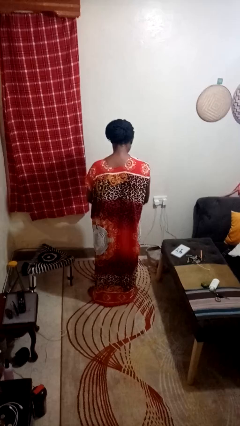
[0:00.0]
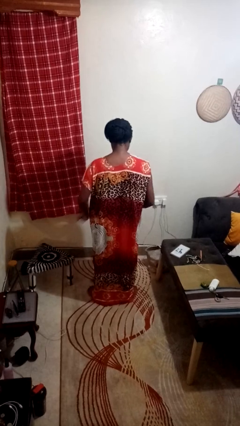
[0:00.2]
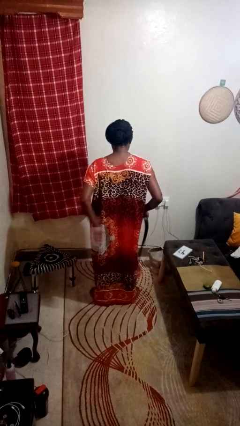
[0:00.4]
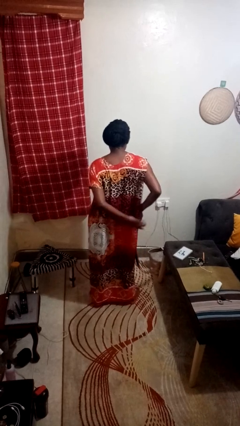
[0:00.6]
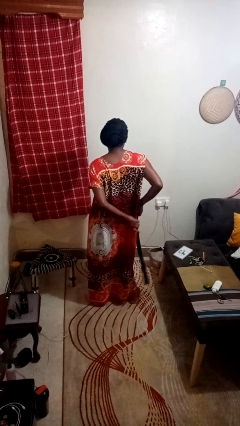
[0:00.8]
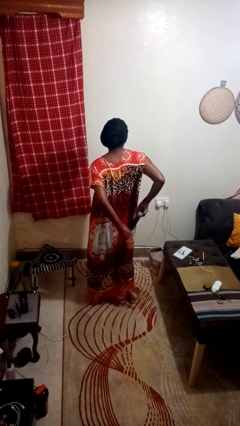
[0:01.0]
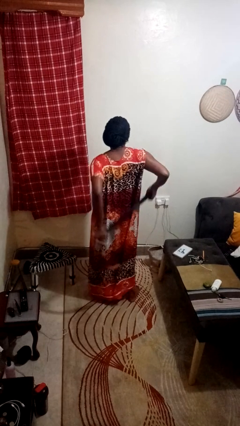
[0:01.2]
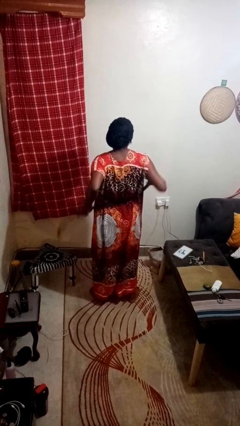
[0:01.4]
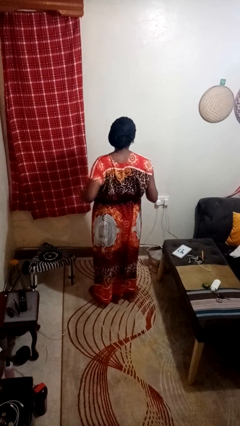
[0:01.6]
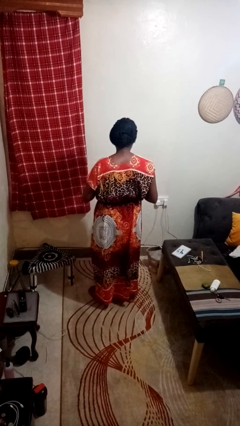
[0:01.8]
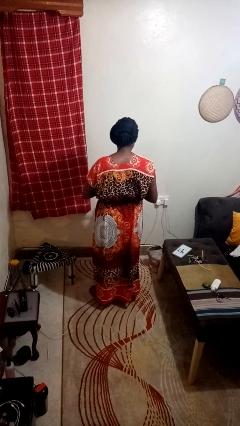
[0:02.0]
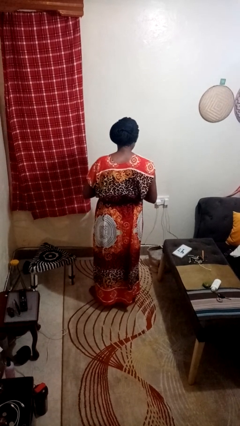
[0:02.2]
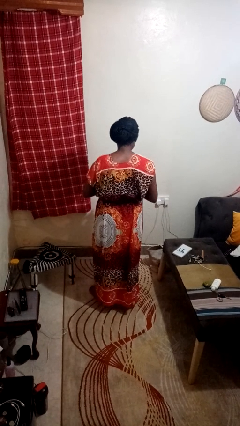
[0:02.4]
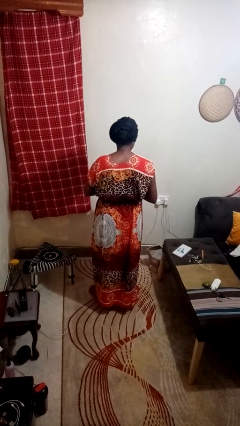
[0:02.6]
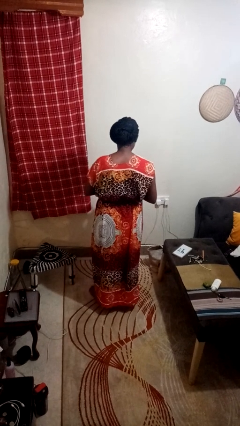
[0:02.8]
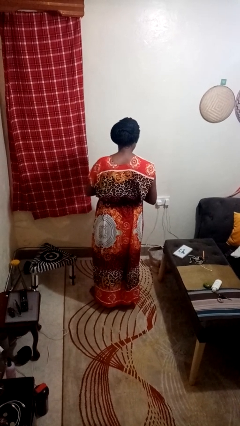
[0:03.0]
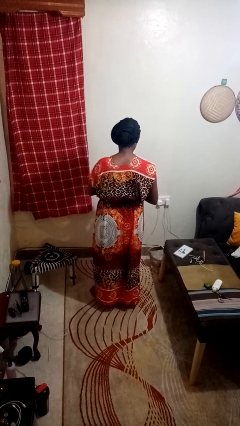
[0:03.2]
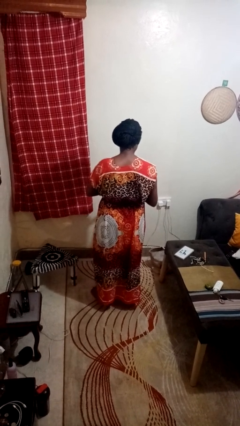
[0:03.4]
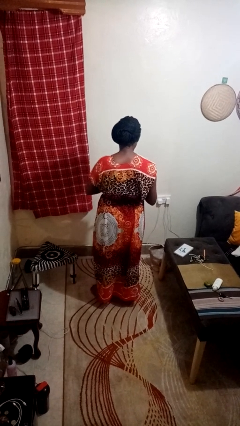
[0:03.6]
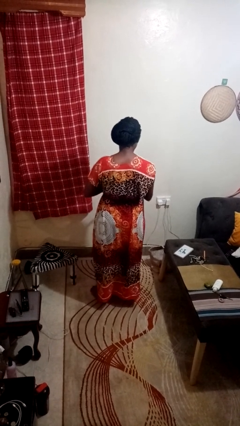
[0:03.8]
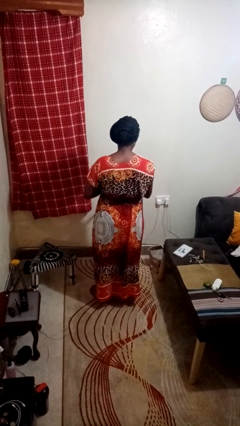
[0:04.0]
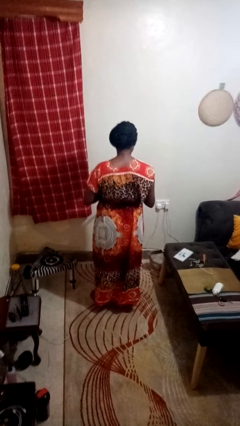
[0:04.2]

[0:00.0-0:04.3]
person puts on belt

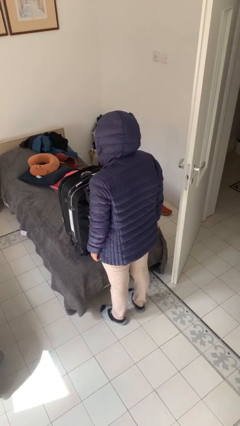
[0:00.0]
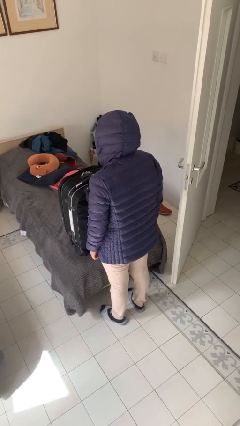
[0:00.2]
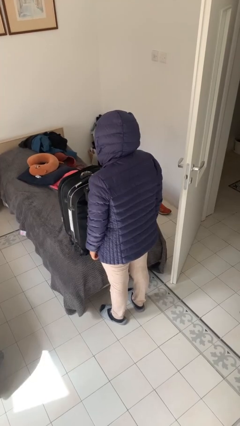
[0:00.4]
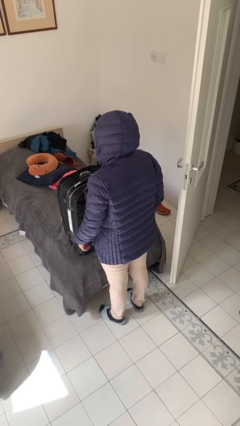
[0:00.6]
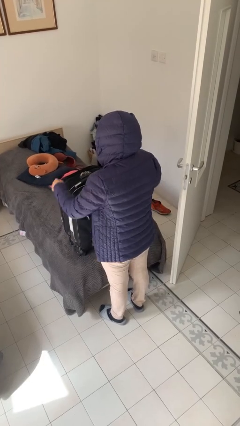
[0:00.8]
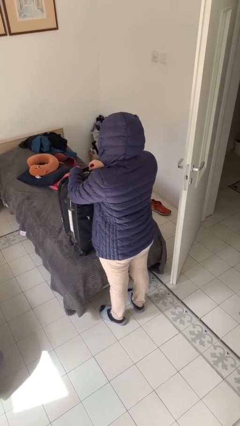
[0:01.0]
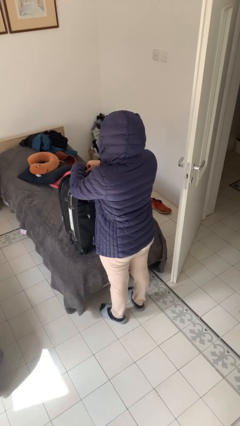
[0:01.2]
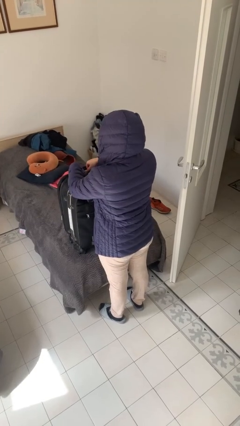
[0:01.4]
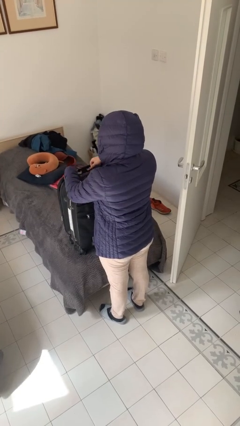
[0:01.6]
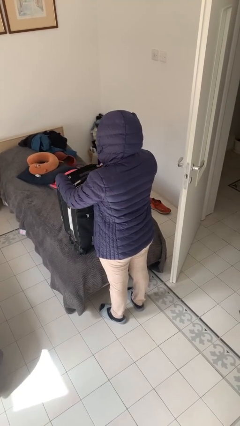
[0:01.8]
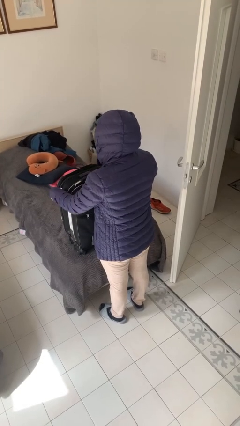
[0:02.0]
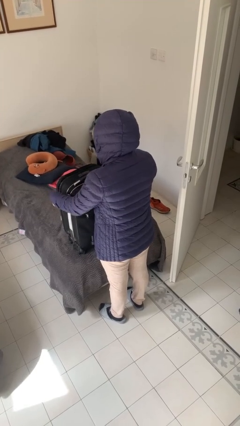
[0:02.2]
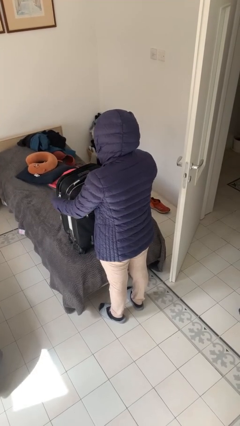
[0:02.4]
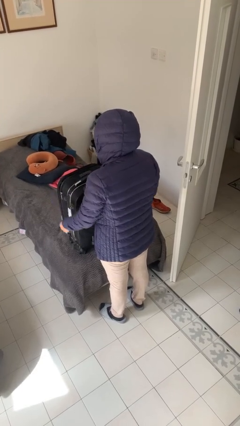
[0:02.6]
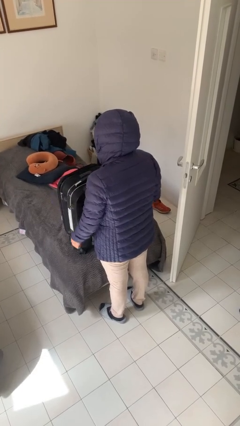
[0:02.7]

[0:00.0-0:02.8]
person opens suitcase

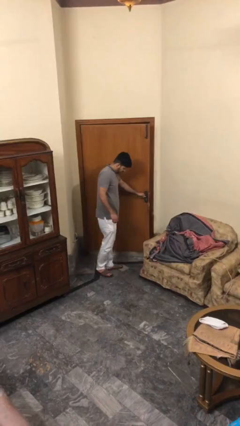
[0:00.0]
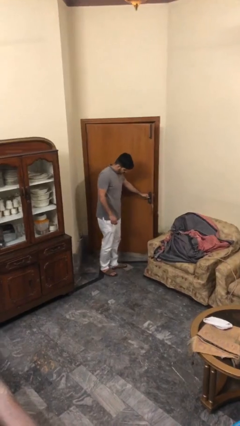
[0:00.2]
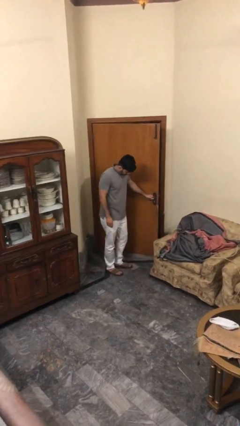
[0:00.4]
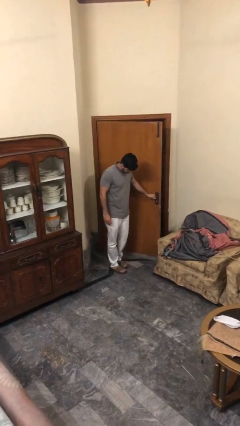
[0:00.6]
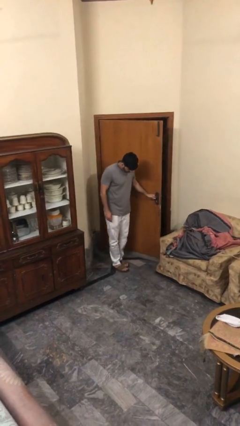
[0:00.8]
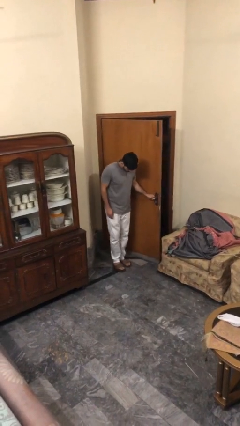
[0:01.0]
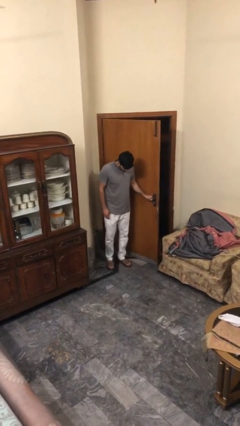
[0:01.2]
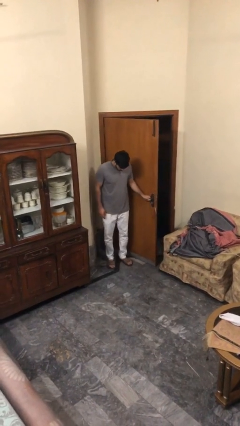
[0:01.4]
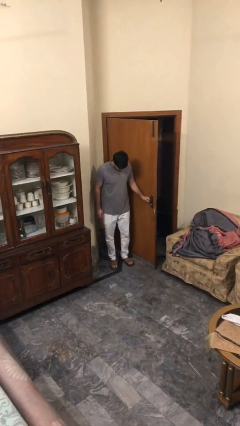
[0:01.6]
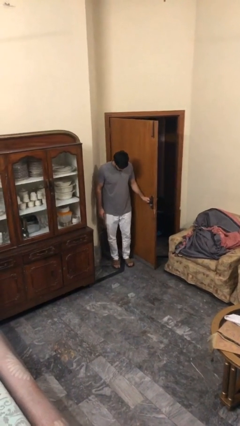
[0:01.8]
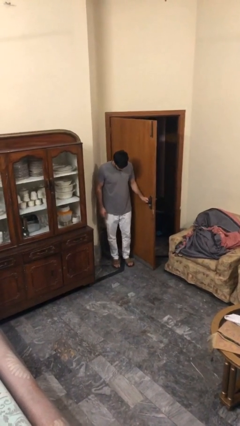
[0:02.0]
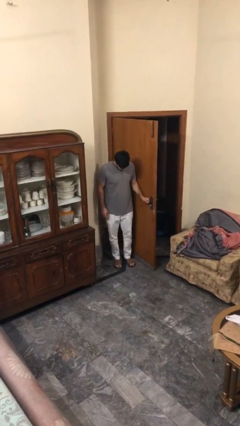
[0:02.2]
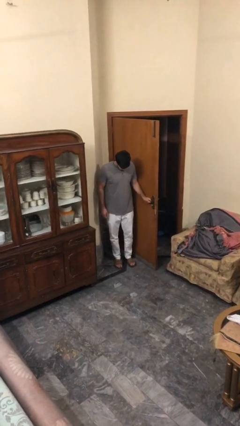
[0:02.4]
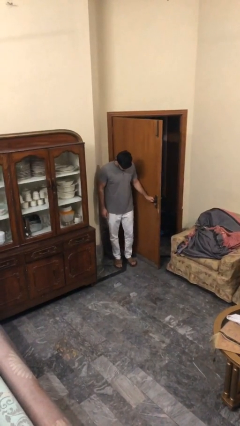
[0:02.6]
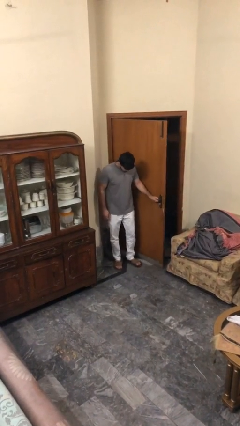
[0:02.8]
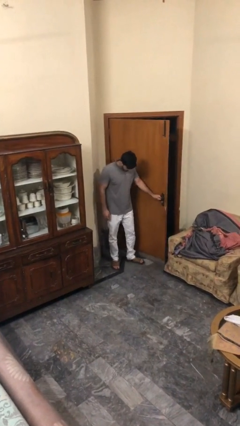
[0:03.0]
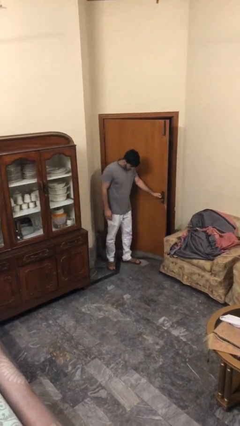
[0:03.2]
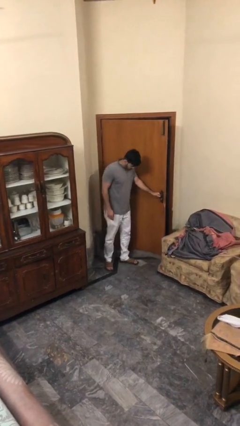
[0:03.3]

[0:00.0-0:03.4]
person opens facility door

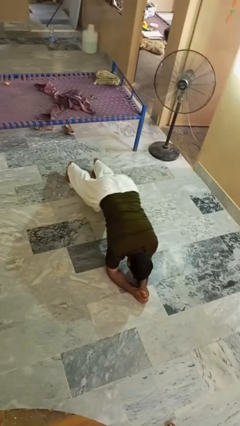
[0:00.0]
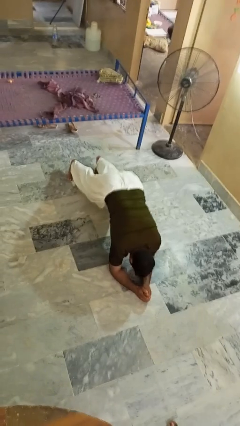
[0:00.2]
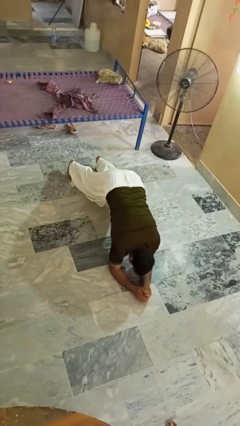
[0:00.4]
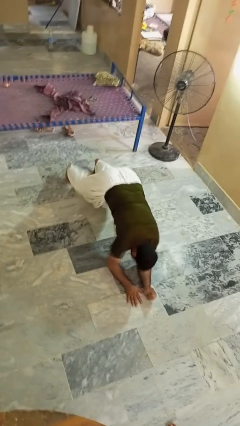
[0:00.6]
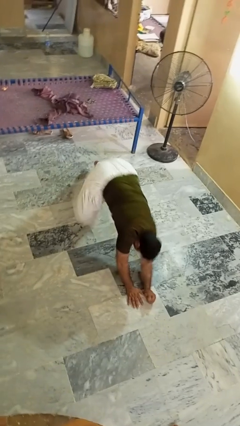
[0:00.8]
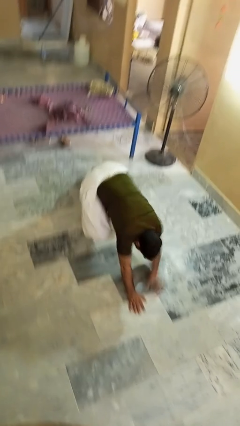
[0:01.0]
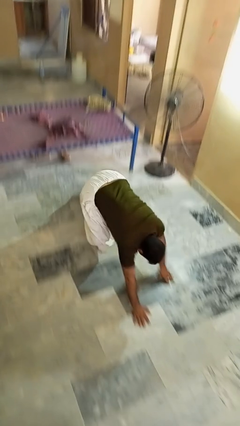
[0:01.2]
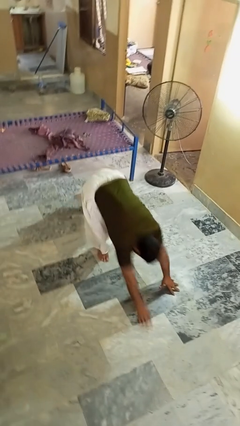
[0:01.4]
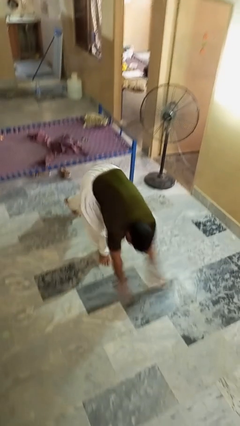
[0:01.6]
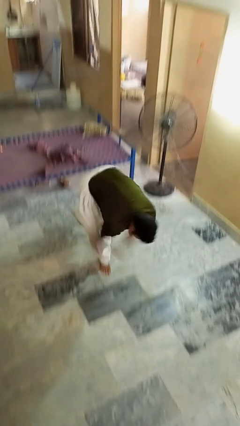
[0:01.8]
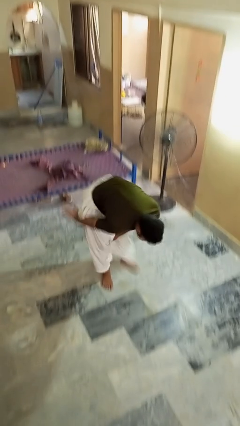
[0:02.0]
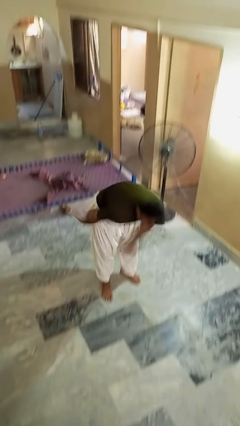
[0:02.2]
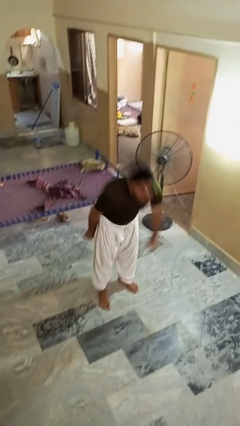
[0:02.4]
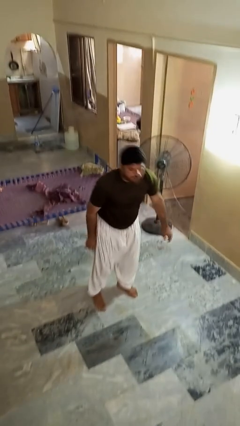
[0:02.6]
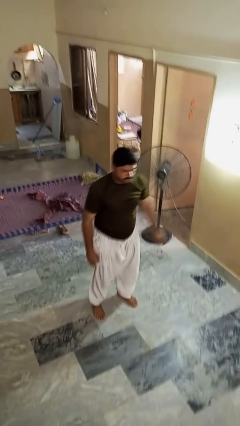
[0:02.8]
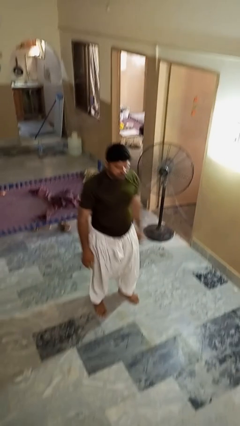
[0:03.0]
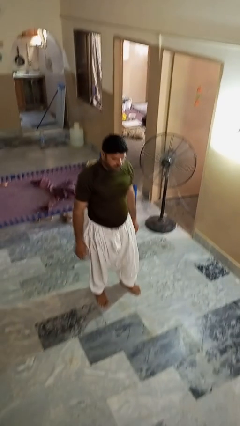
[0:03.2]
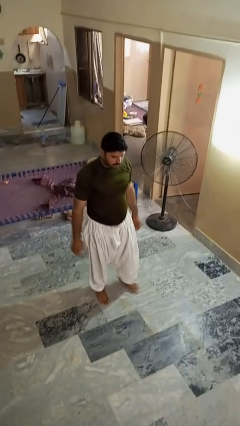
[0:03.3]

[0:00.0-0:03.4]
person stands up from floor

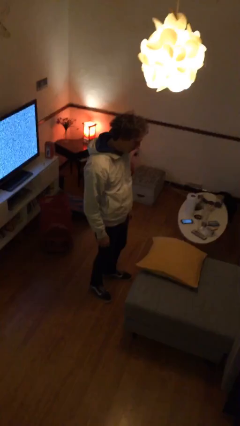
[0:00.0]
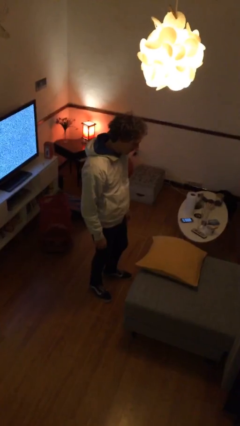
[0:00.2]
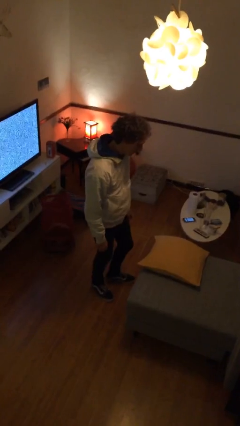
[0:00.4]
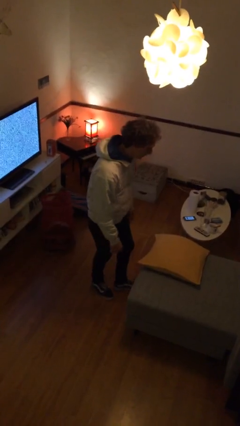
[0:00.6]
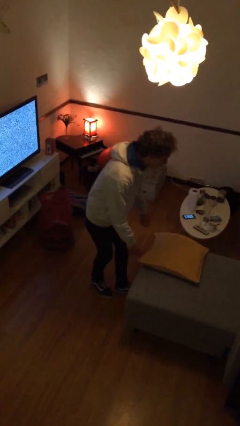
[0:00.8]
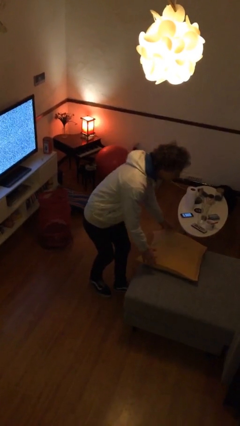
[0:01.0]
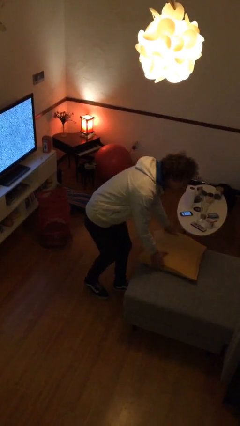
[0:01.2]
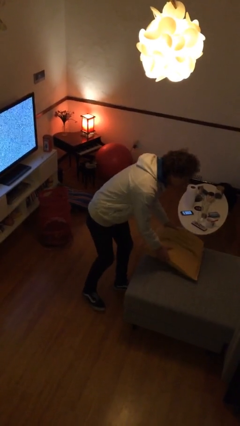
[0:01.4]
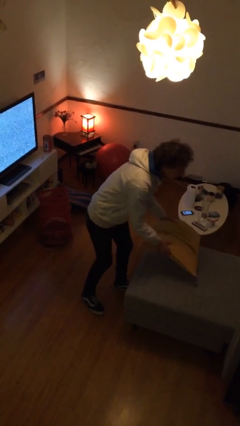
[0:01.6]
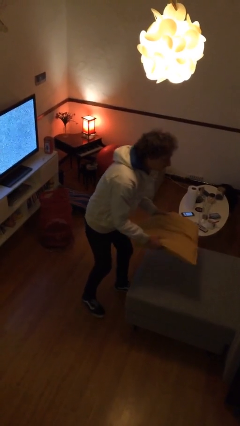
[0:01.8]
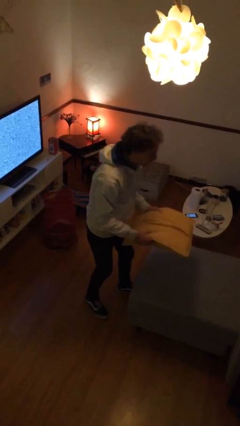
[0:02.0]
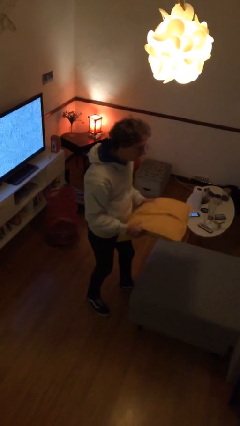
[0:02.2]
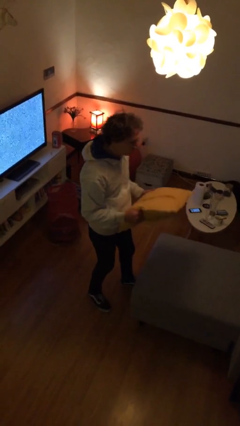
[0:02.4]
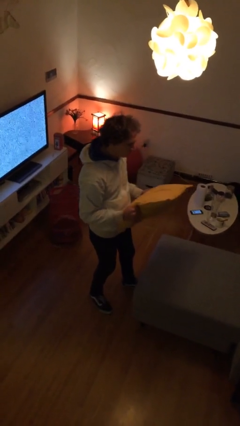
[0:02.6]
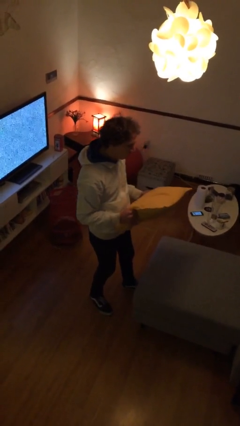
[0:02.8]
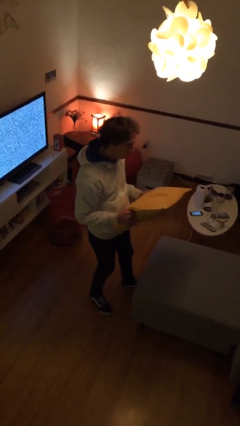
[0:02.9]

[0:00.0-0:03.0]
person picks up object from couch

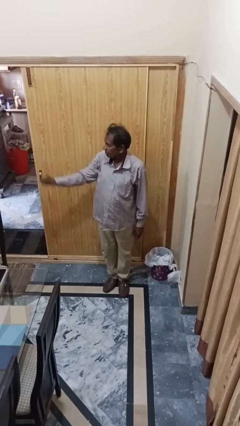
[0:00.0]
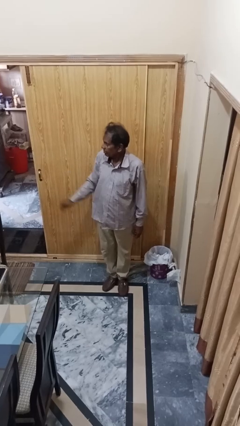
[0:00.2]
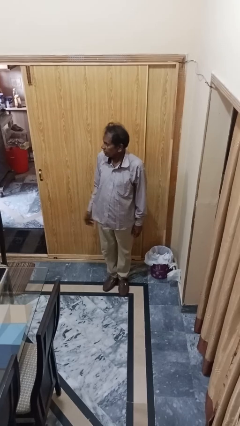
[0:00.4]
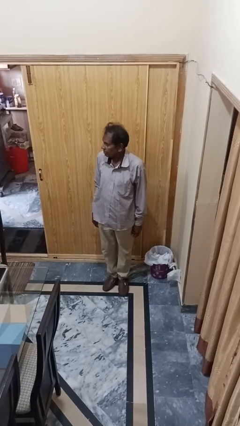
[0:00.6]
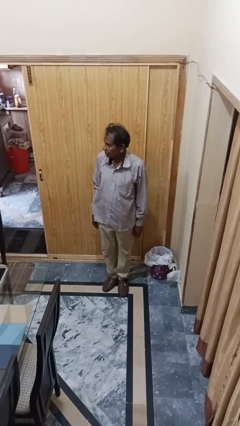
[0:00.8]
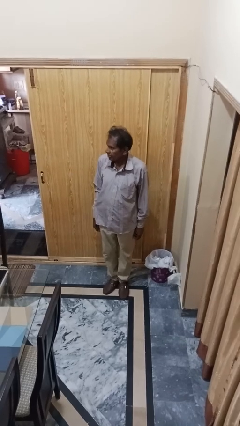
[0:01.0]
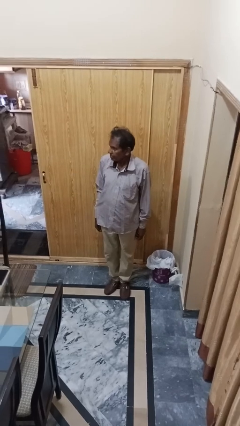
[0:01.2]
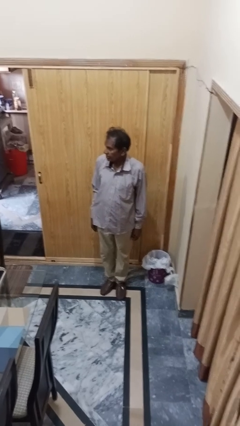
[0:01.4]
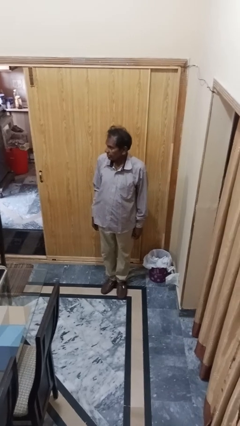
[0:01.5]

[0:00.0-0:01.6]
person gestures lower hand
